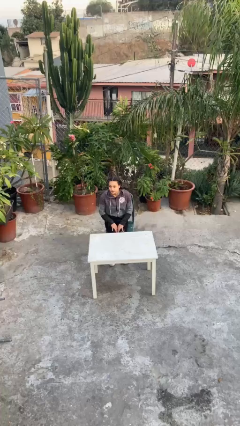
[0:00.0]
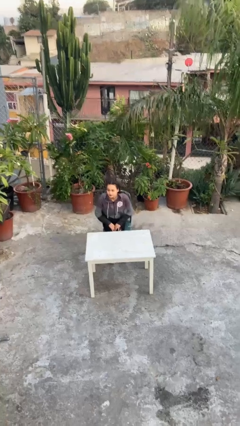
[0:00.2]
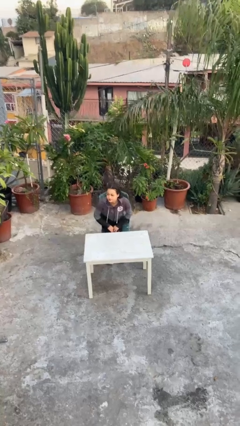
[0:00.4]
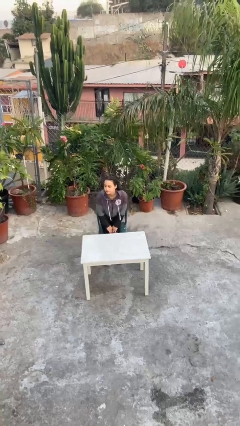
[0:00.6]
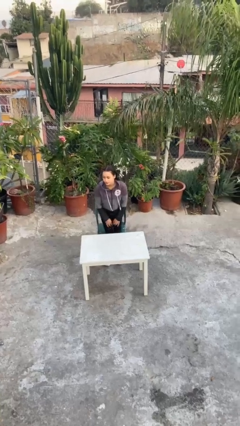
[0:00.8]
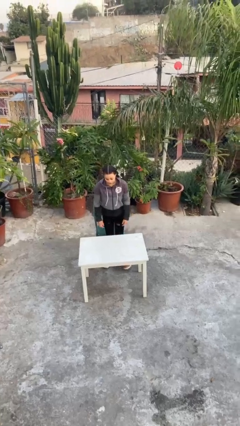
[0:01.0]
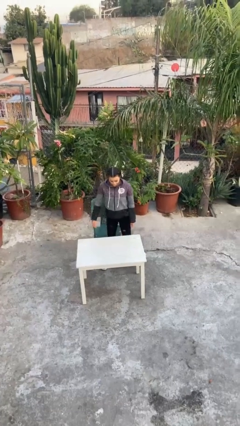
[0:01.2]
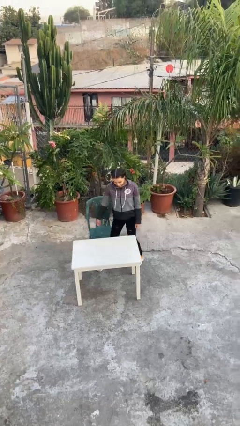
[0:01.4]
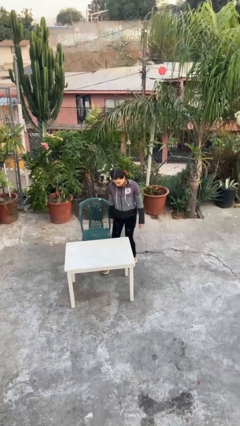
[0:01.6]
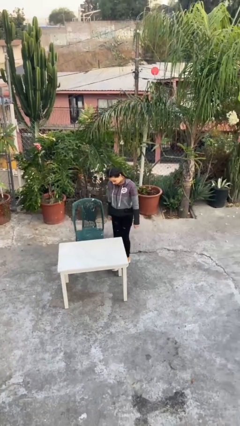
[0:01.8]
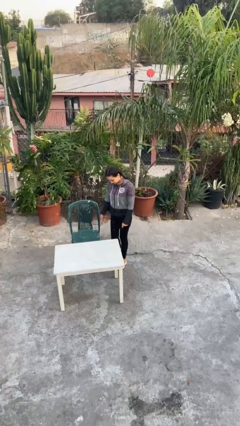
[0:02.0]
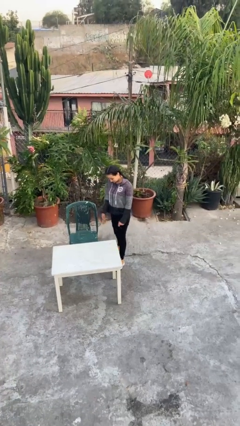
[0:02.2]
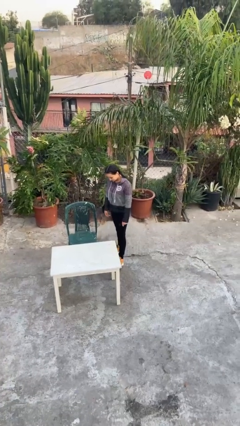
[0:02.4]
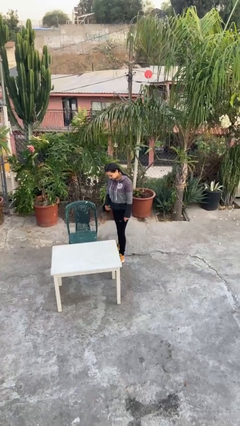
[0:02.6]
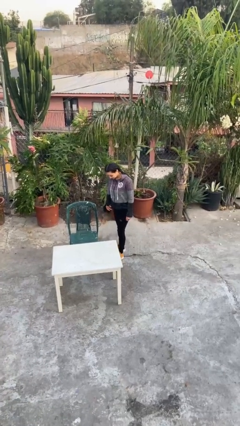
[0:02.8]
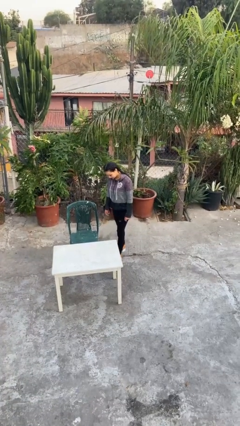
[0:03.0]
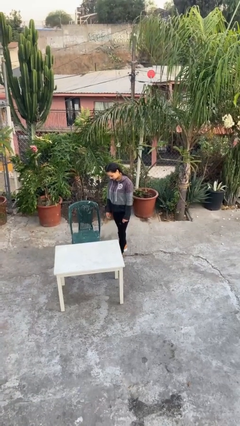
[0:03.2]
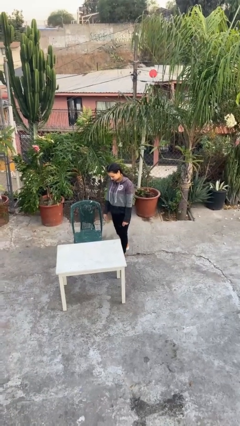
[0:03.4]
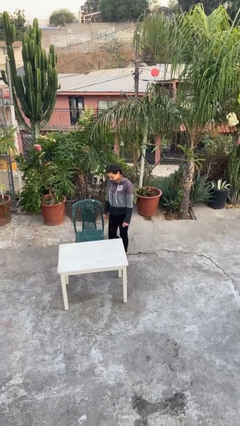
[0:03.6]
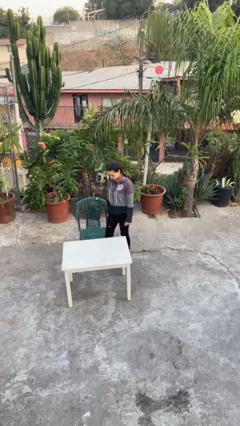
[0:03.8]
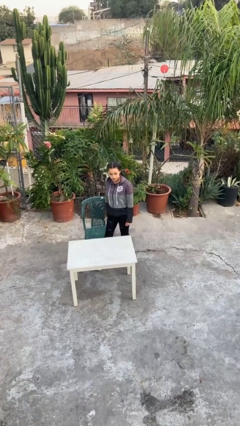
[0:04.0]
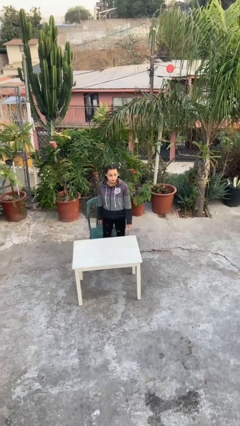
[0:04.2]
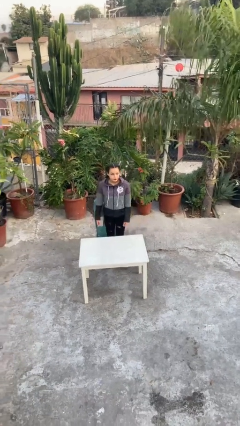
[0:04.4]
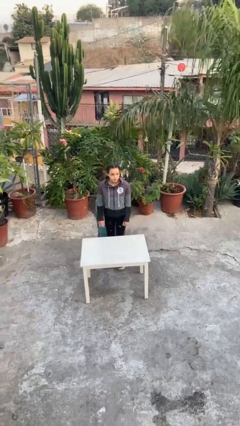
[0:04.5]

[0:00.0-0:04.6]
person stands up

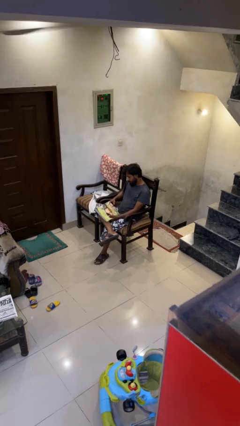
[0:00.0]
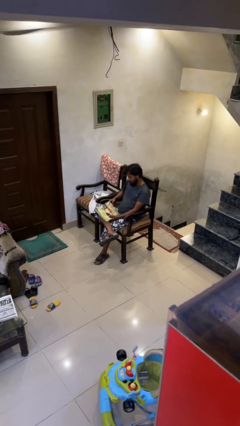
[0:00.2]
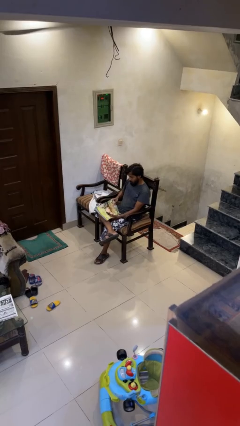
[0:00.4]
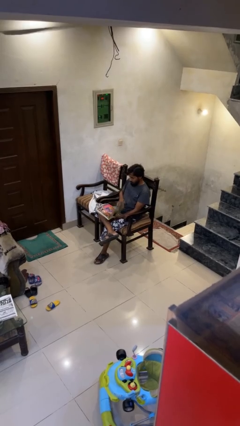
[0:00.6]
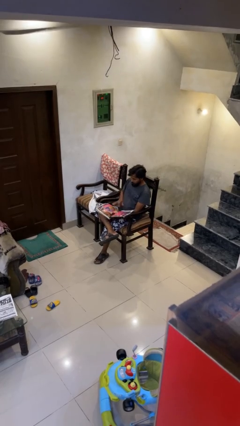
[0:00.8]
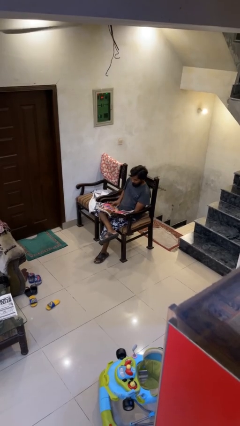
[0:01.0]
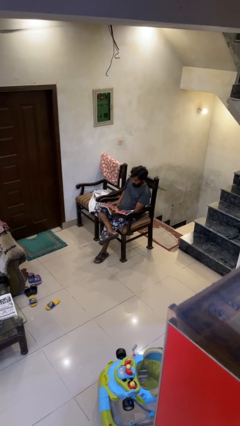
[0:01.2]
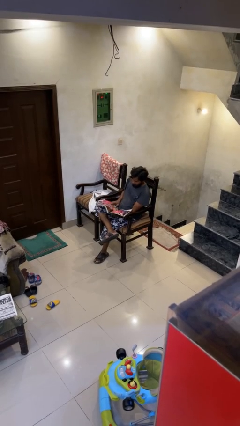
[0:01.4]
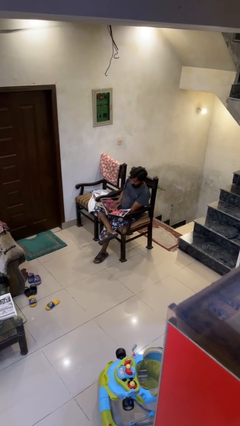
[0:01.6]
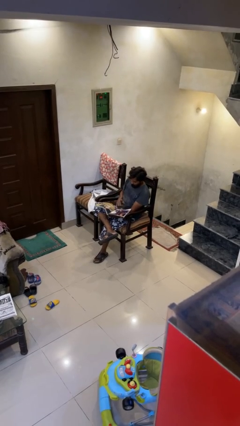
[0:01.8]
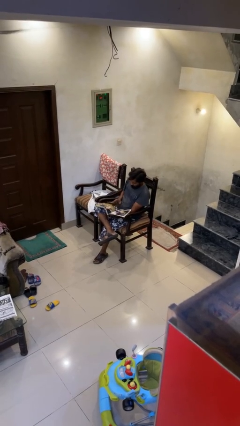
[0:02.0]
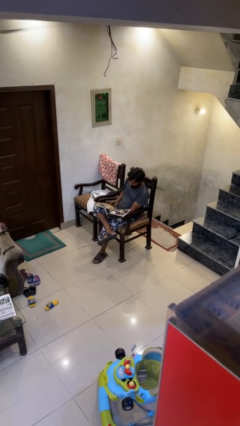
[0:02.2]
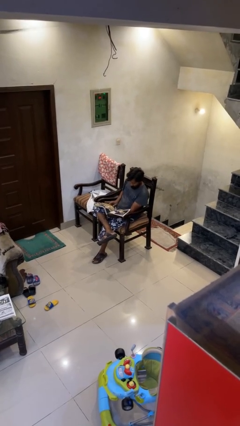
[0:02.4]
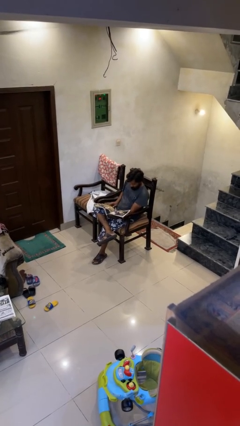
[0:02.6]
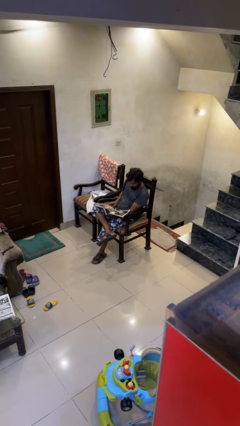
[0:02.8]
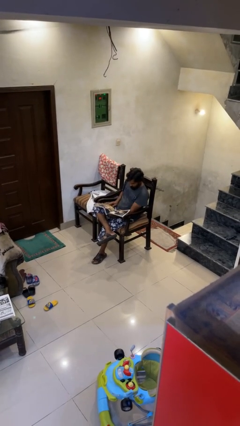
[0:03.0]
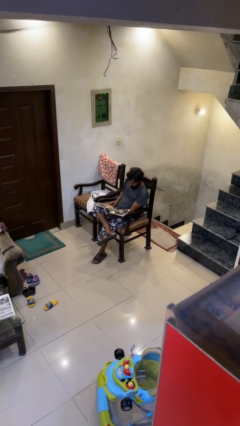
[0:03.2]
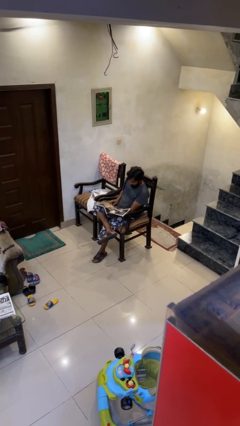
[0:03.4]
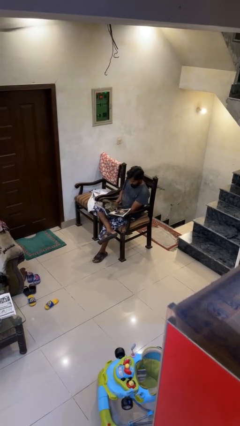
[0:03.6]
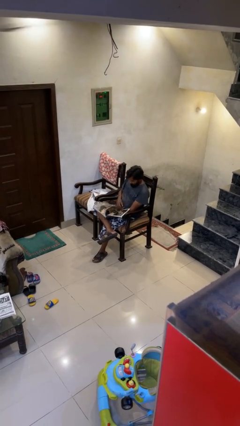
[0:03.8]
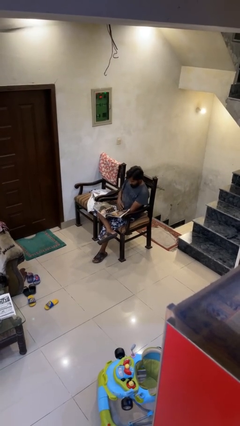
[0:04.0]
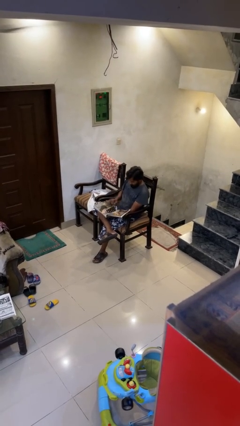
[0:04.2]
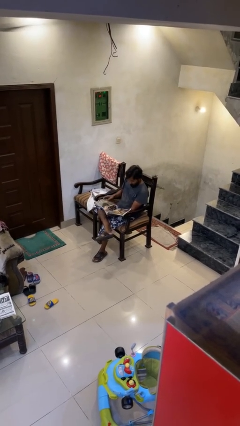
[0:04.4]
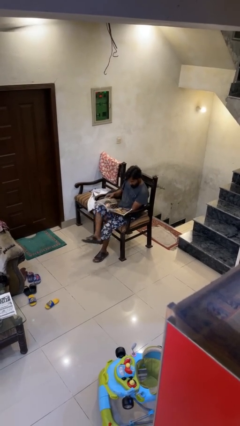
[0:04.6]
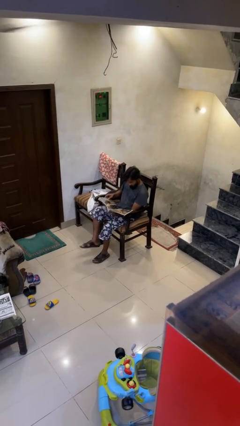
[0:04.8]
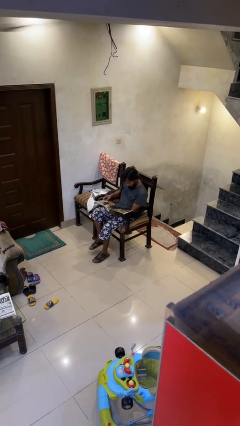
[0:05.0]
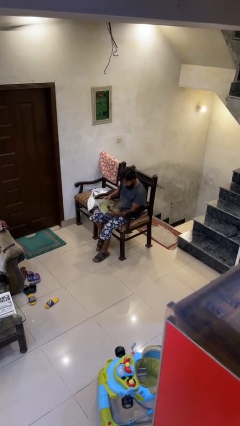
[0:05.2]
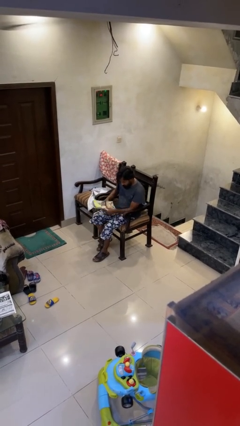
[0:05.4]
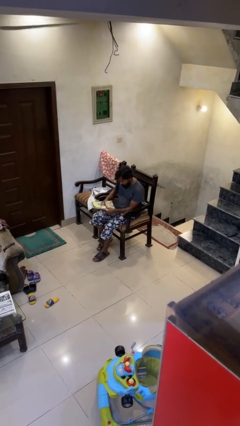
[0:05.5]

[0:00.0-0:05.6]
person reads magazine

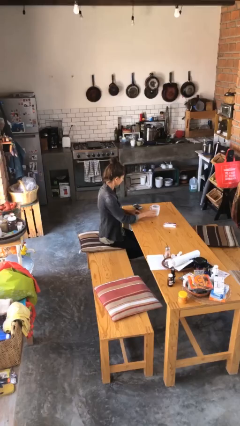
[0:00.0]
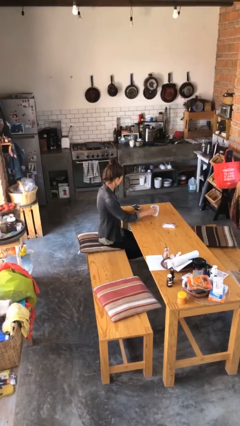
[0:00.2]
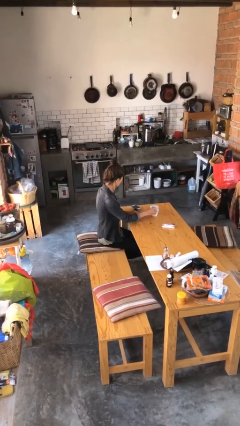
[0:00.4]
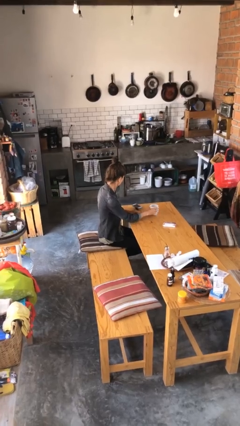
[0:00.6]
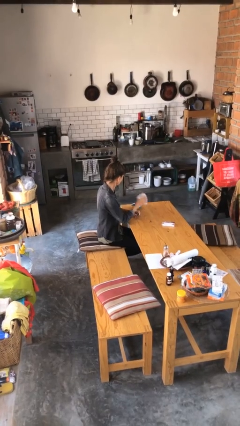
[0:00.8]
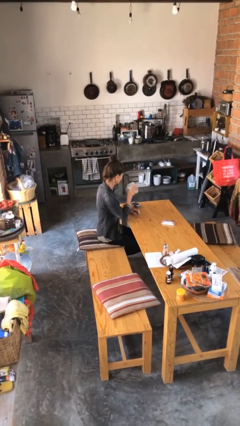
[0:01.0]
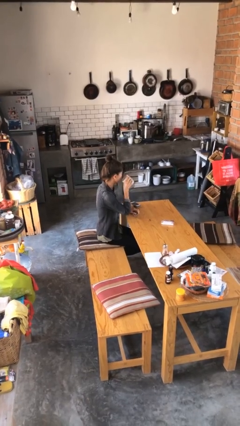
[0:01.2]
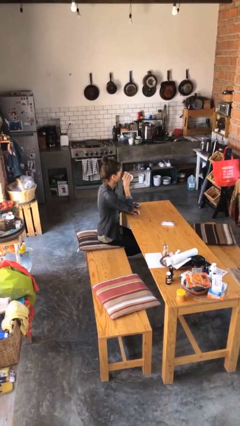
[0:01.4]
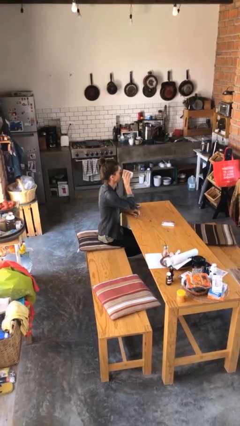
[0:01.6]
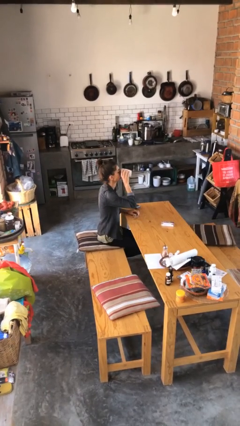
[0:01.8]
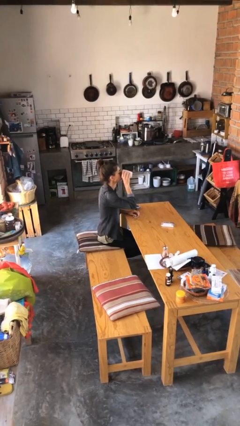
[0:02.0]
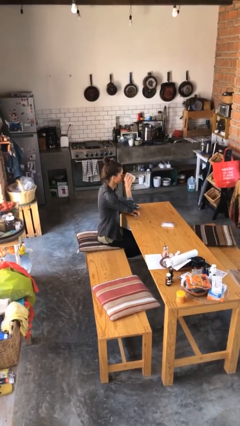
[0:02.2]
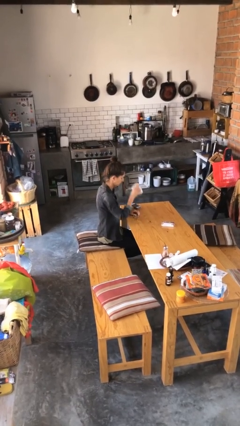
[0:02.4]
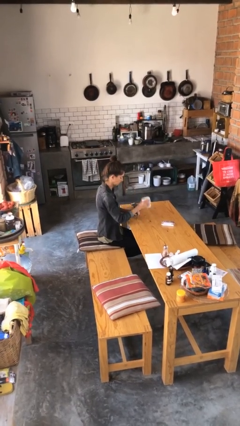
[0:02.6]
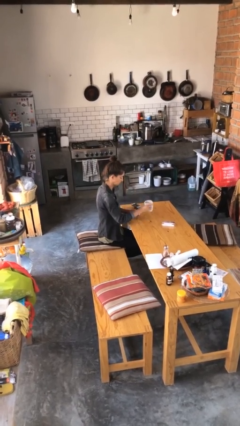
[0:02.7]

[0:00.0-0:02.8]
person drinks from cup

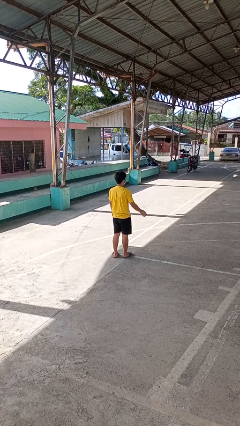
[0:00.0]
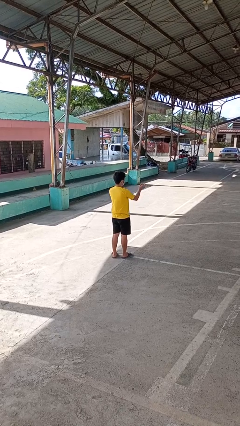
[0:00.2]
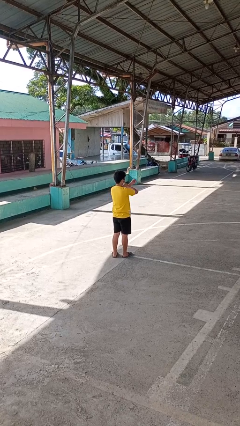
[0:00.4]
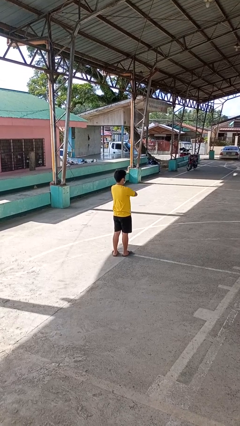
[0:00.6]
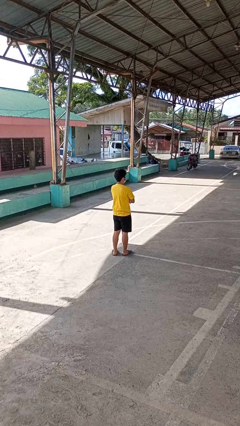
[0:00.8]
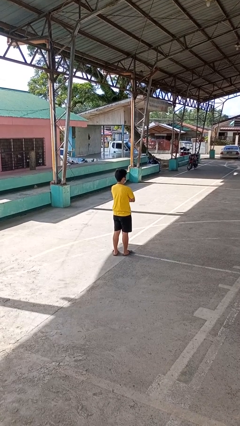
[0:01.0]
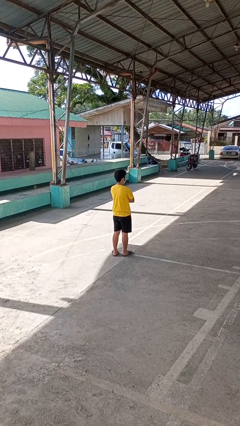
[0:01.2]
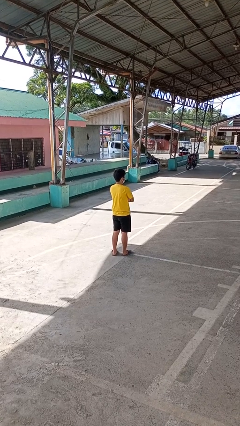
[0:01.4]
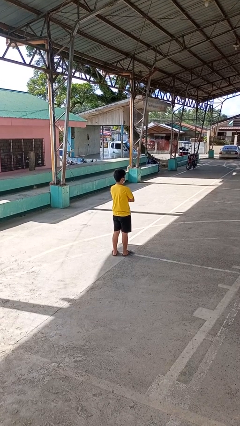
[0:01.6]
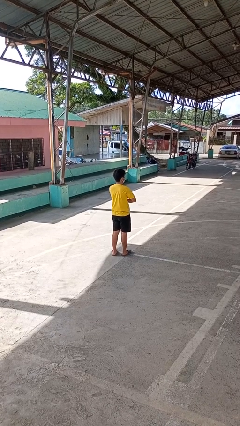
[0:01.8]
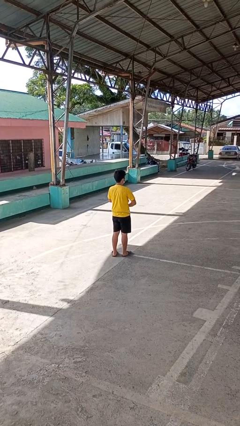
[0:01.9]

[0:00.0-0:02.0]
person crosses arms

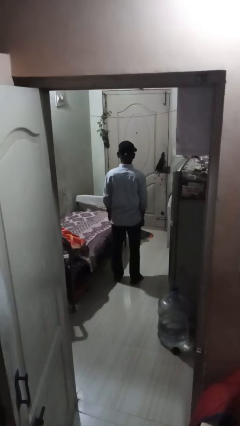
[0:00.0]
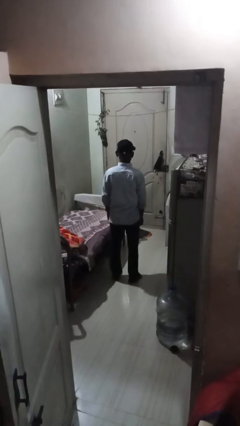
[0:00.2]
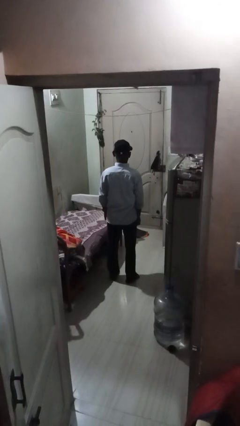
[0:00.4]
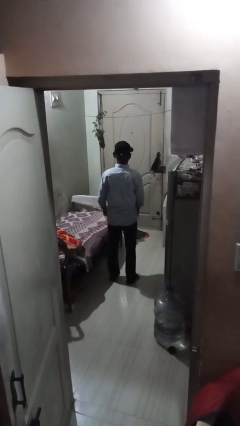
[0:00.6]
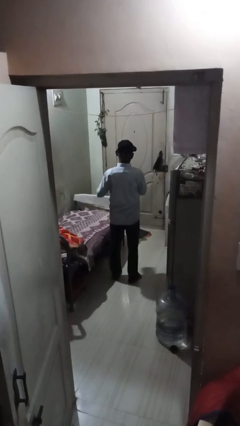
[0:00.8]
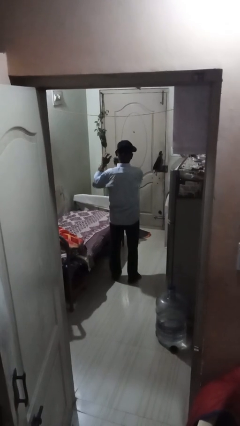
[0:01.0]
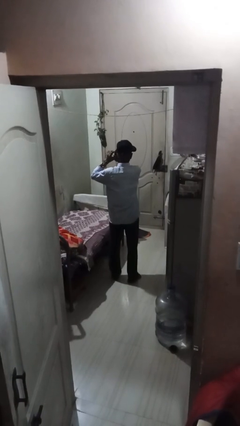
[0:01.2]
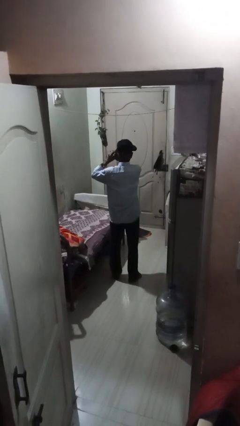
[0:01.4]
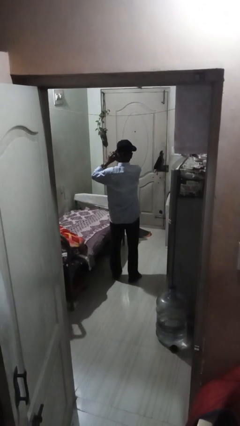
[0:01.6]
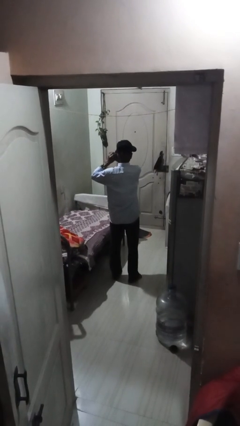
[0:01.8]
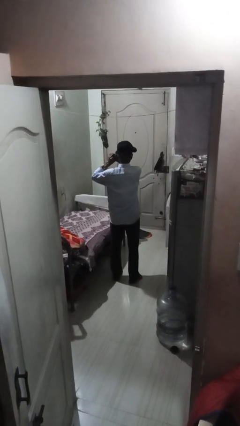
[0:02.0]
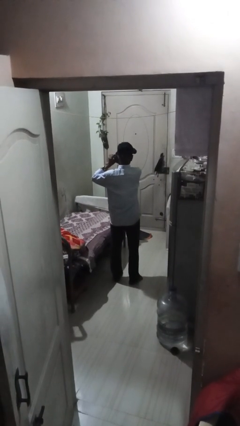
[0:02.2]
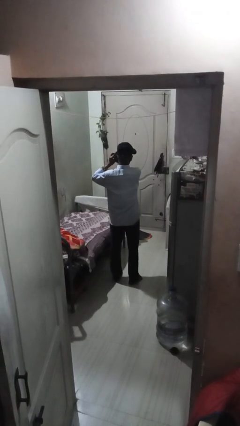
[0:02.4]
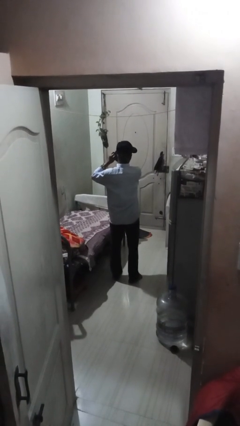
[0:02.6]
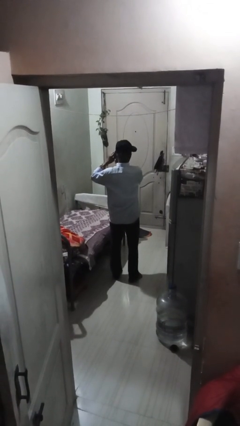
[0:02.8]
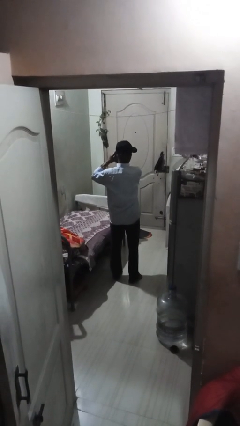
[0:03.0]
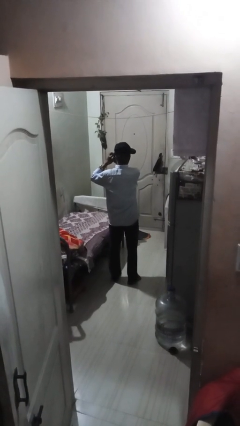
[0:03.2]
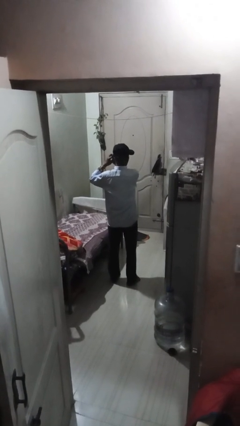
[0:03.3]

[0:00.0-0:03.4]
person takes off earrings
